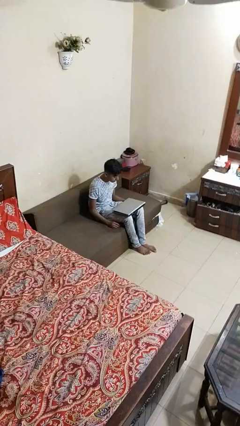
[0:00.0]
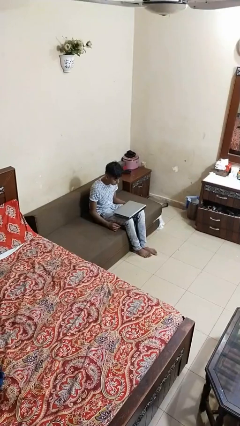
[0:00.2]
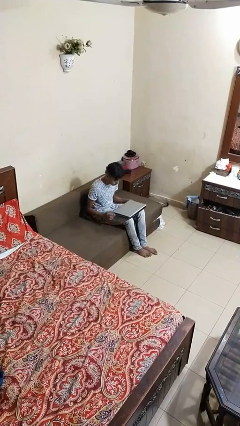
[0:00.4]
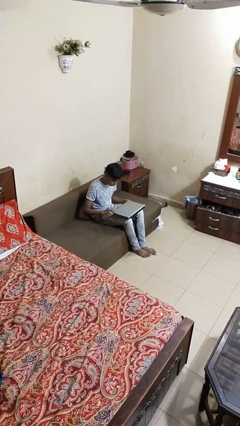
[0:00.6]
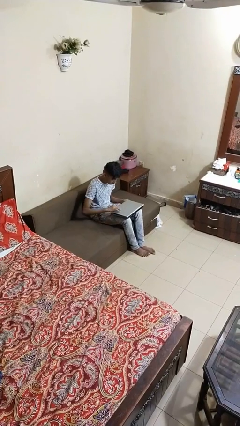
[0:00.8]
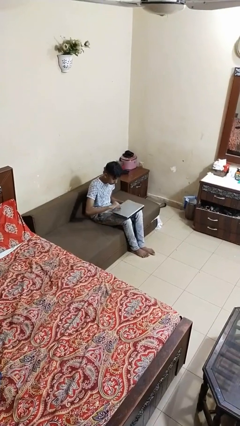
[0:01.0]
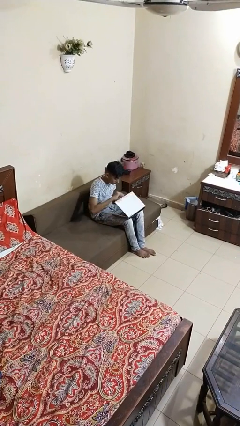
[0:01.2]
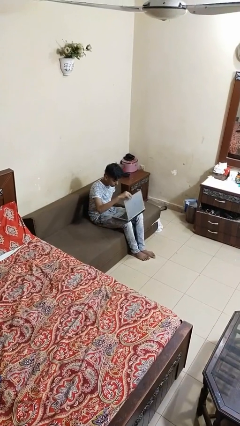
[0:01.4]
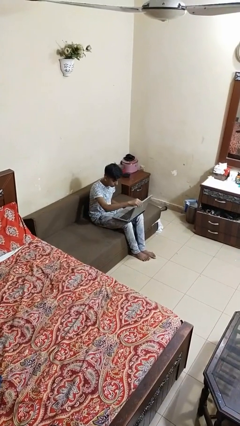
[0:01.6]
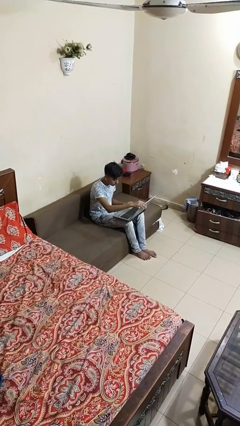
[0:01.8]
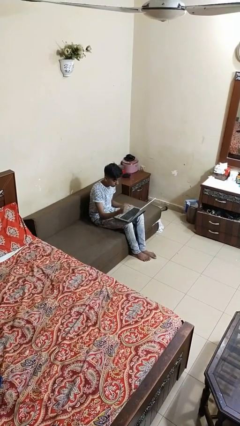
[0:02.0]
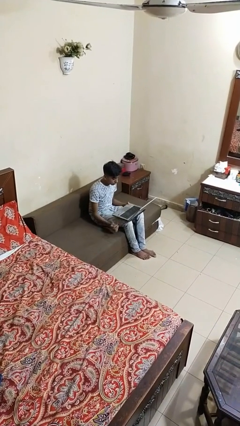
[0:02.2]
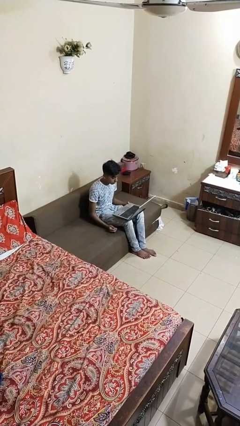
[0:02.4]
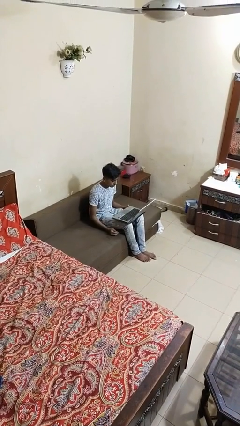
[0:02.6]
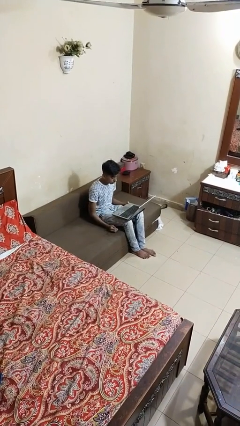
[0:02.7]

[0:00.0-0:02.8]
person opens laptop

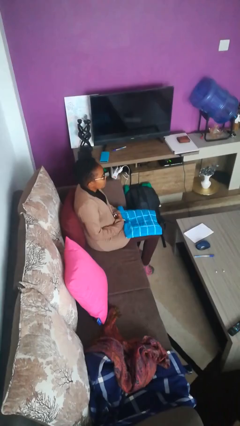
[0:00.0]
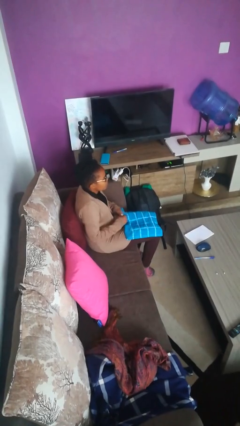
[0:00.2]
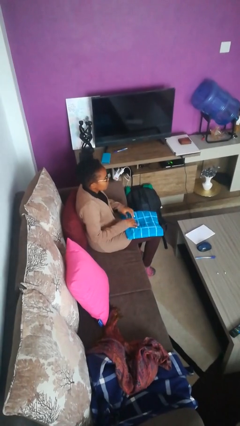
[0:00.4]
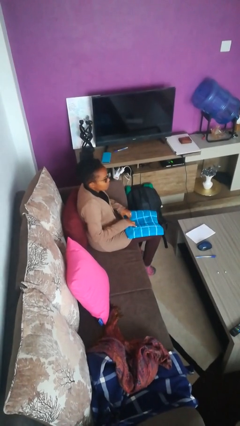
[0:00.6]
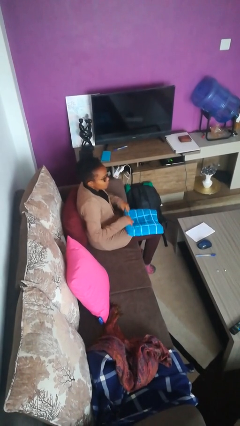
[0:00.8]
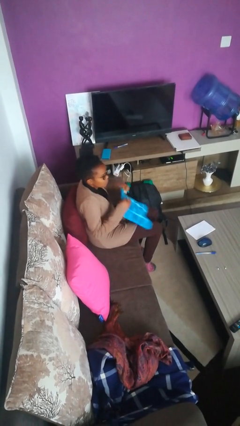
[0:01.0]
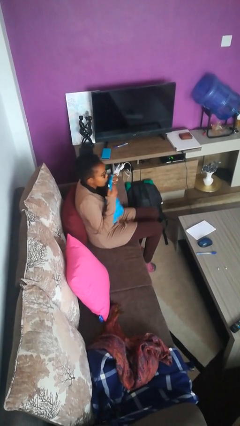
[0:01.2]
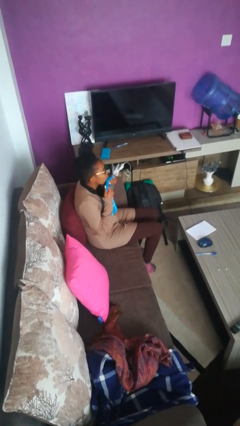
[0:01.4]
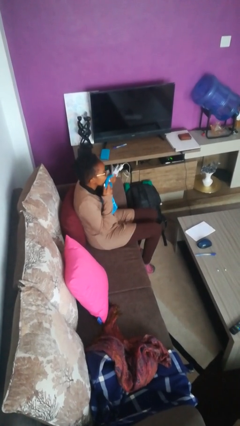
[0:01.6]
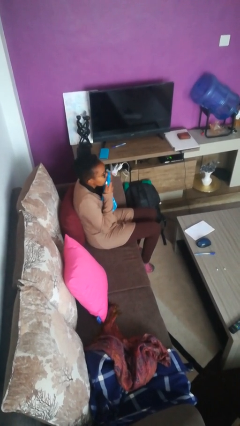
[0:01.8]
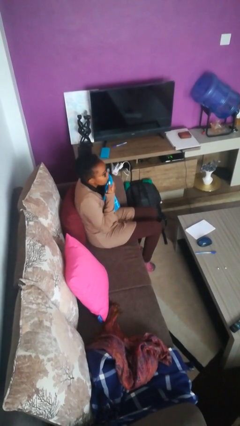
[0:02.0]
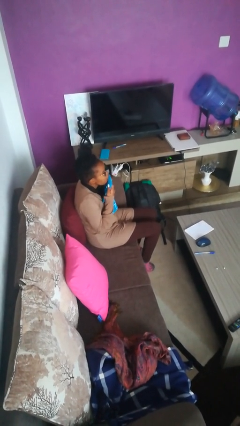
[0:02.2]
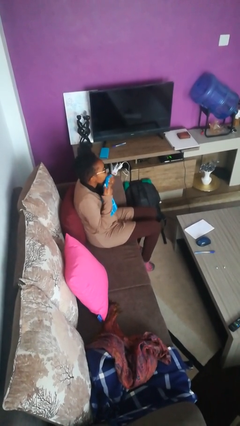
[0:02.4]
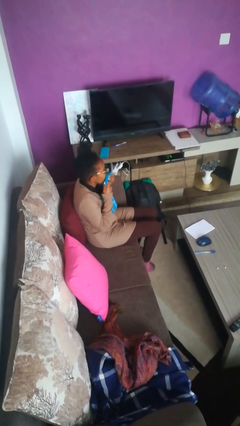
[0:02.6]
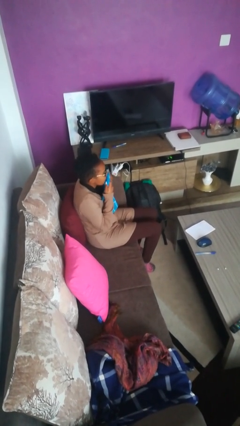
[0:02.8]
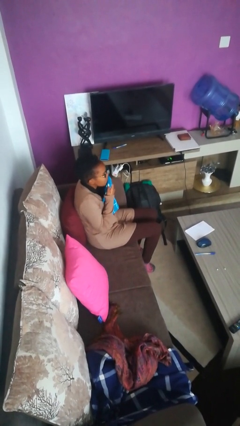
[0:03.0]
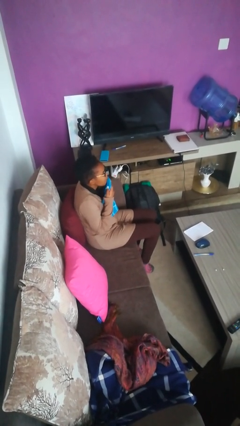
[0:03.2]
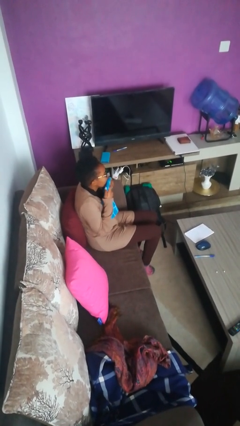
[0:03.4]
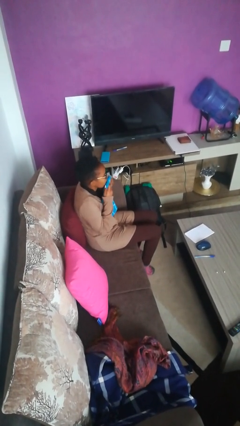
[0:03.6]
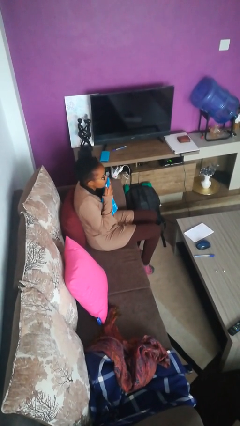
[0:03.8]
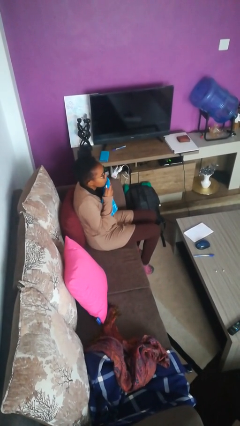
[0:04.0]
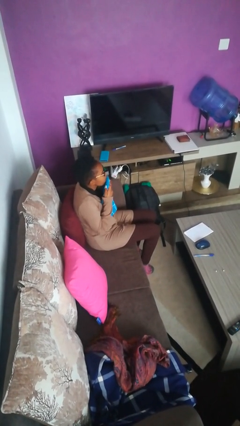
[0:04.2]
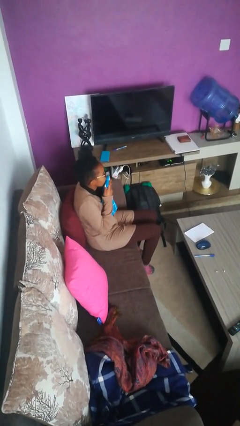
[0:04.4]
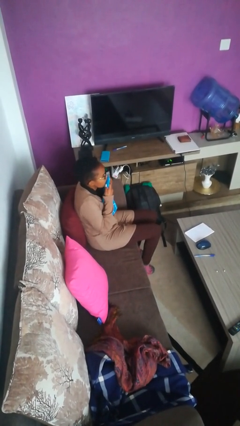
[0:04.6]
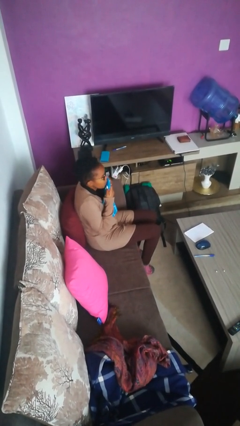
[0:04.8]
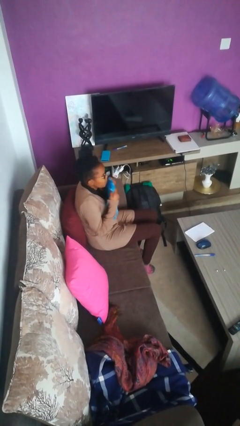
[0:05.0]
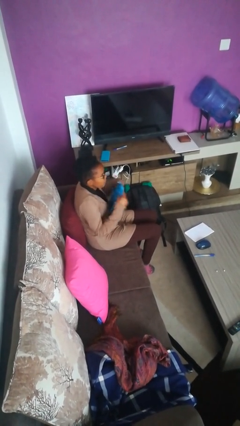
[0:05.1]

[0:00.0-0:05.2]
person wipes mouth with napkin

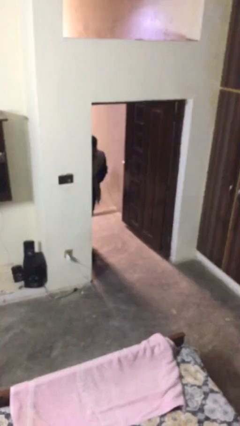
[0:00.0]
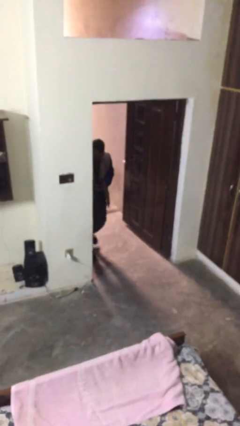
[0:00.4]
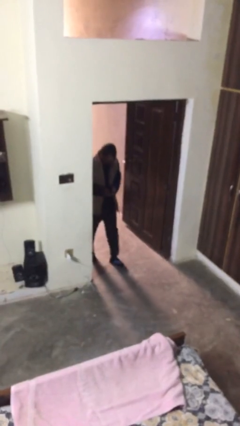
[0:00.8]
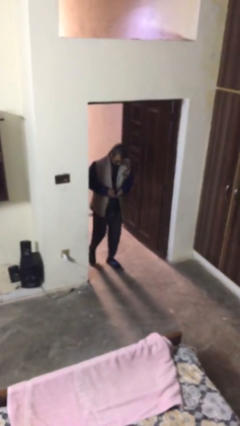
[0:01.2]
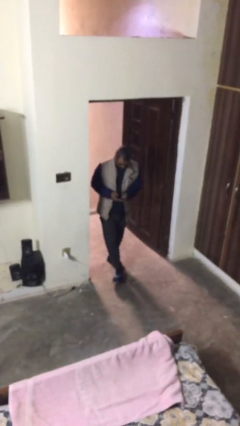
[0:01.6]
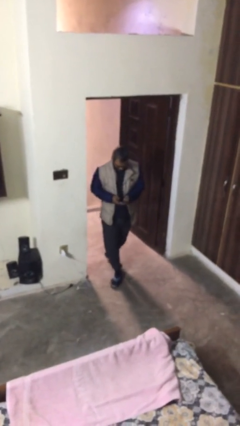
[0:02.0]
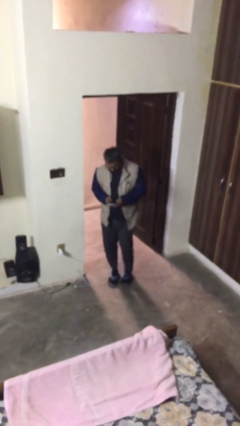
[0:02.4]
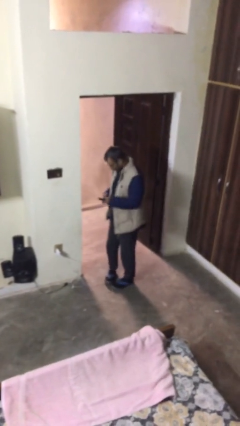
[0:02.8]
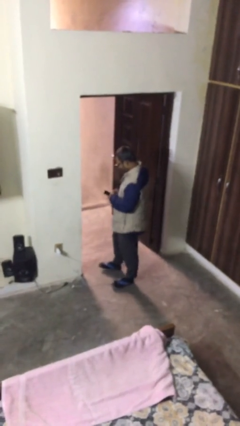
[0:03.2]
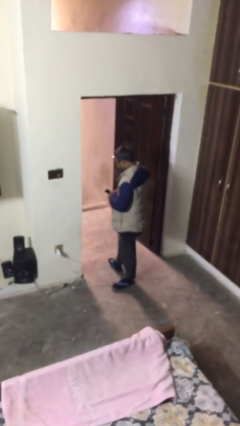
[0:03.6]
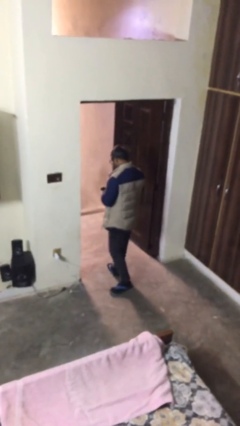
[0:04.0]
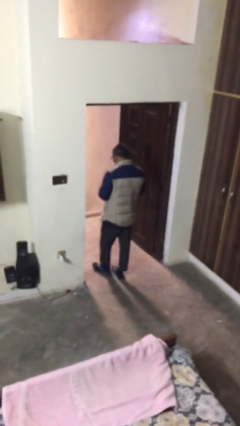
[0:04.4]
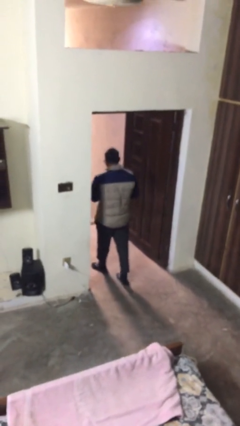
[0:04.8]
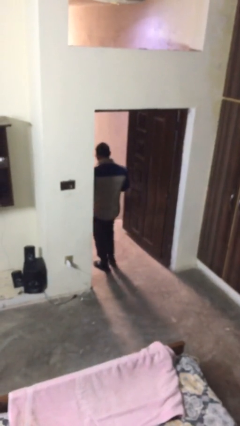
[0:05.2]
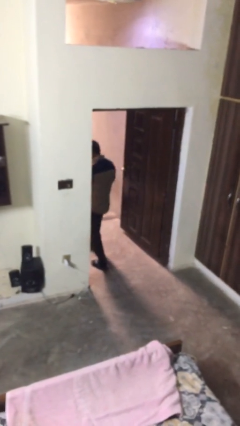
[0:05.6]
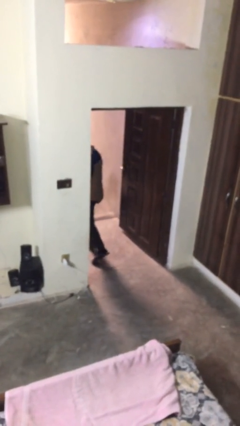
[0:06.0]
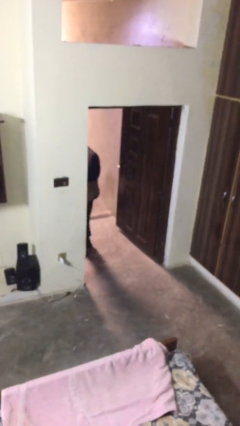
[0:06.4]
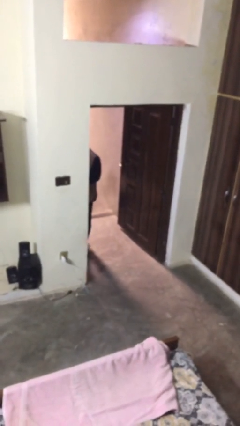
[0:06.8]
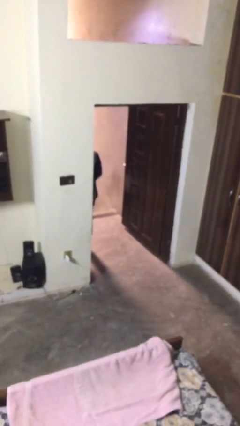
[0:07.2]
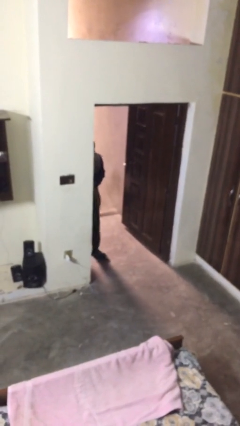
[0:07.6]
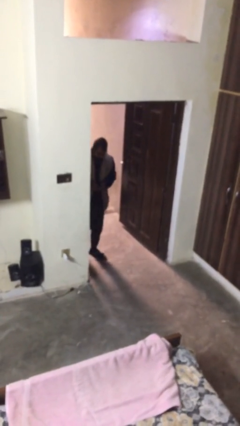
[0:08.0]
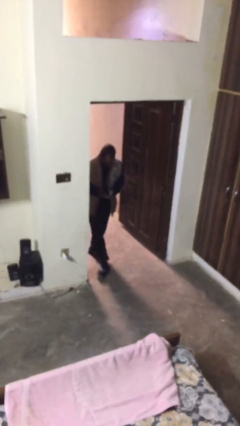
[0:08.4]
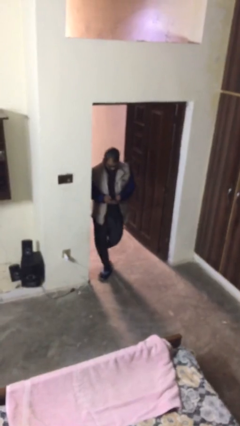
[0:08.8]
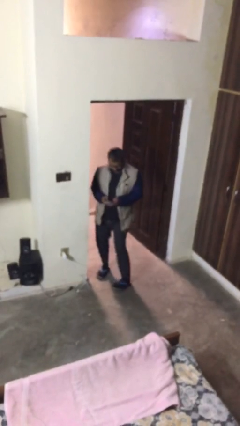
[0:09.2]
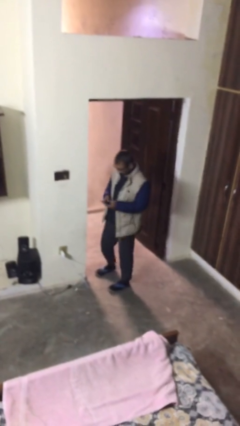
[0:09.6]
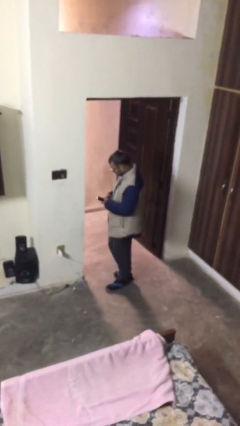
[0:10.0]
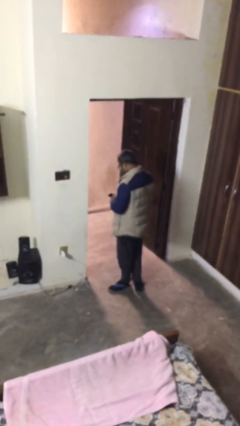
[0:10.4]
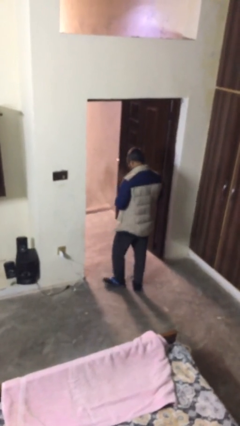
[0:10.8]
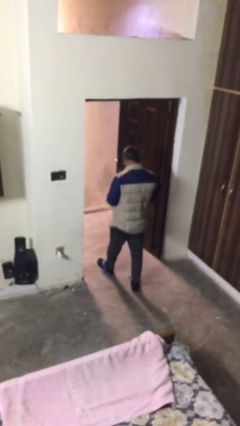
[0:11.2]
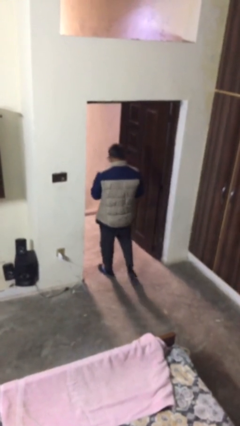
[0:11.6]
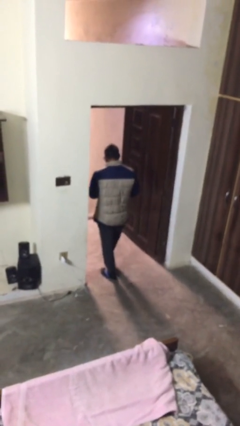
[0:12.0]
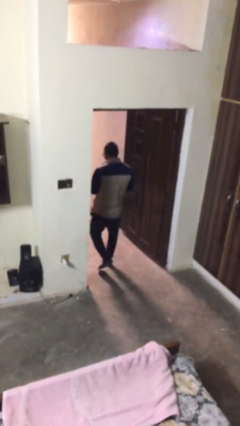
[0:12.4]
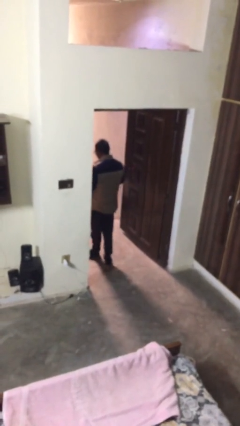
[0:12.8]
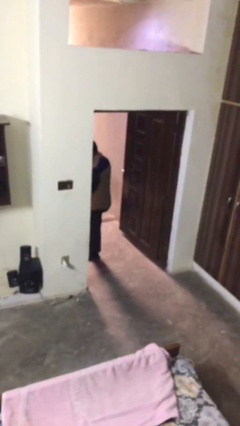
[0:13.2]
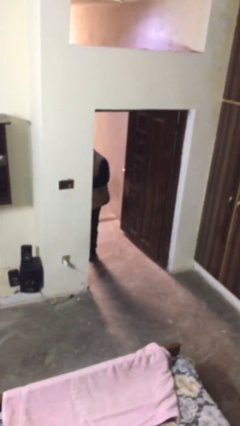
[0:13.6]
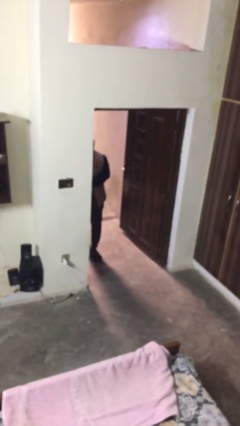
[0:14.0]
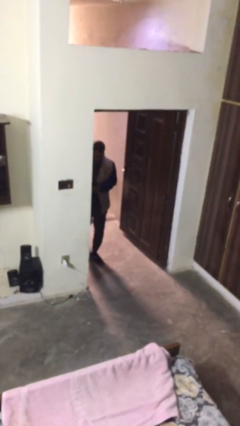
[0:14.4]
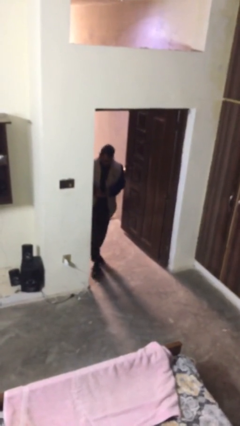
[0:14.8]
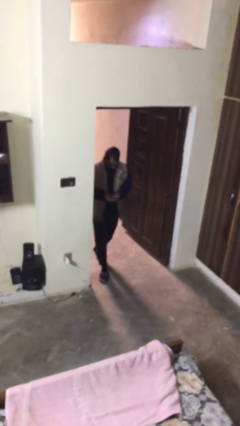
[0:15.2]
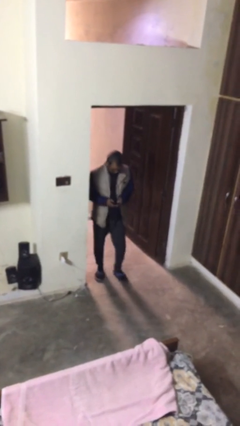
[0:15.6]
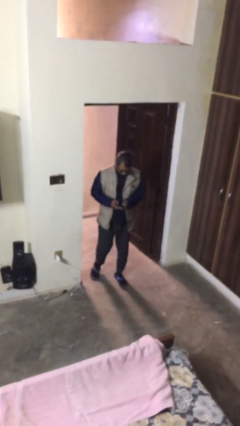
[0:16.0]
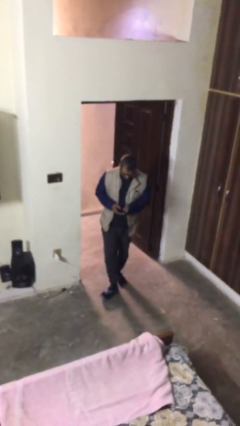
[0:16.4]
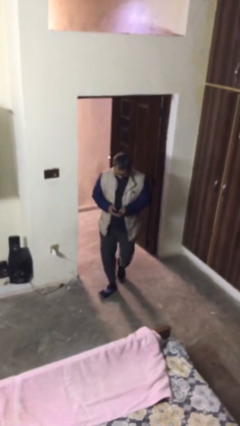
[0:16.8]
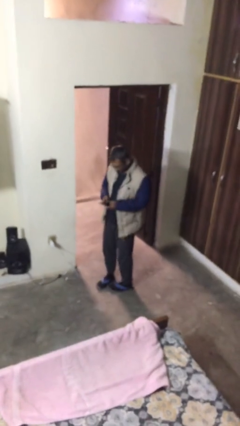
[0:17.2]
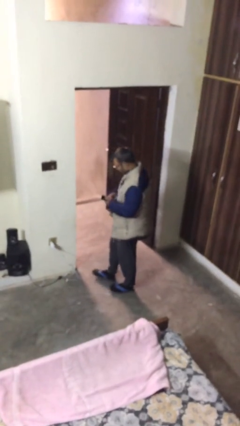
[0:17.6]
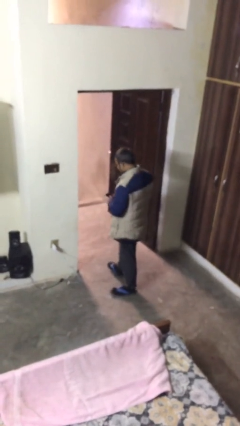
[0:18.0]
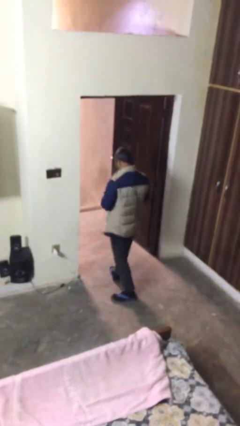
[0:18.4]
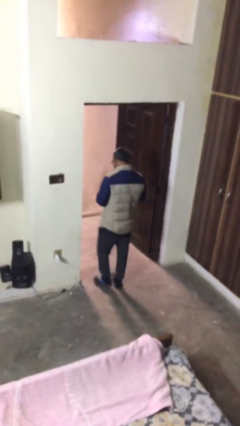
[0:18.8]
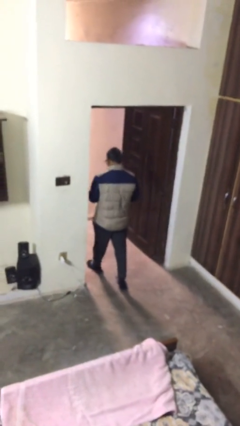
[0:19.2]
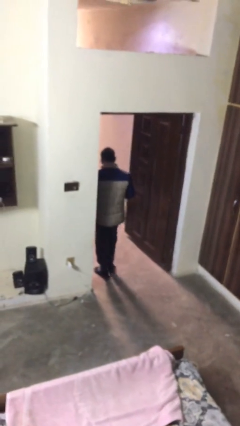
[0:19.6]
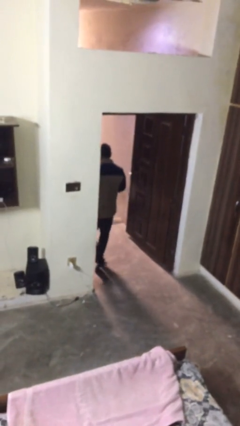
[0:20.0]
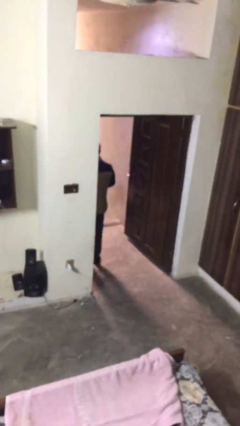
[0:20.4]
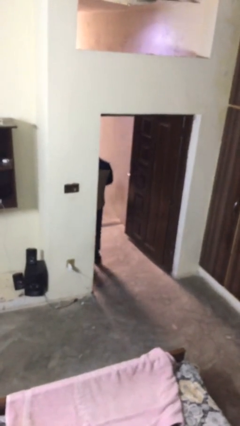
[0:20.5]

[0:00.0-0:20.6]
person texts on phone
